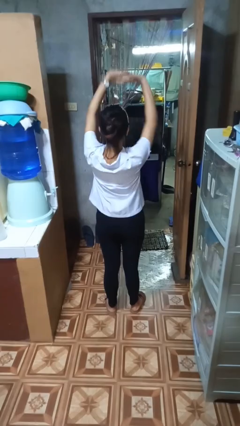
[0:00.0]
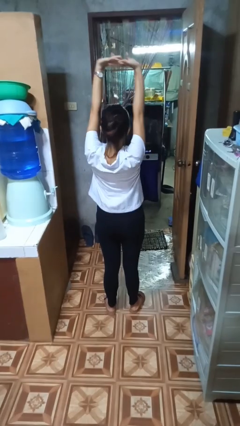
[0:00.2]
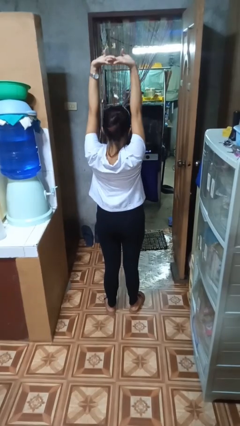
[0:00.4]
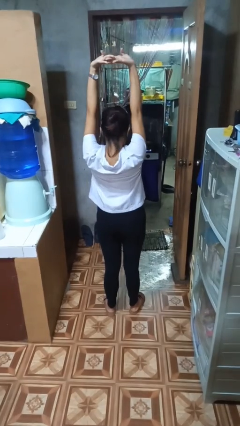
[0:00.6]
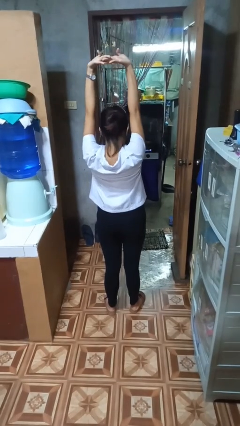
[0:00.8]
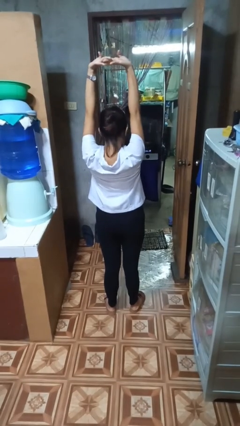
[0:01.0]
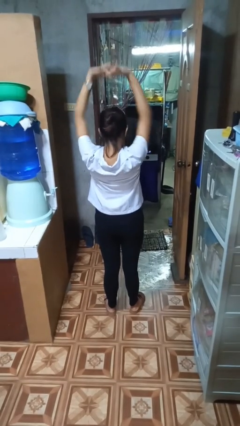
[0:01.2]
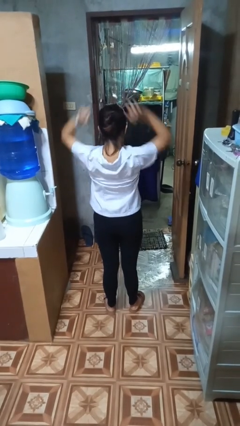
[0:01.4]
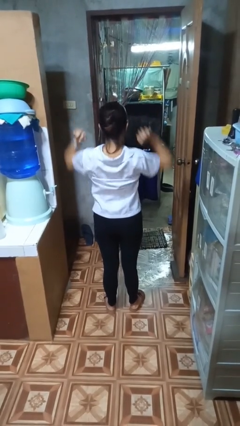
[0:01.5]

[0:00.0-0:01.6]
person stretches arms over head

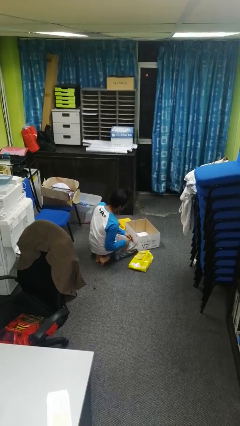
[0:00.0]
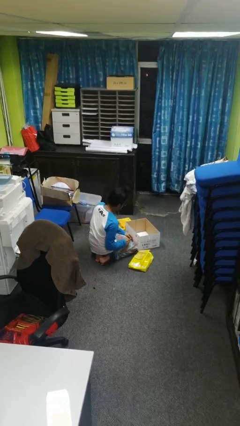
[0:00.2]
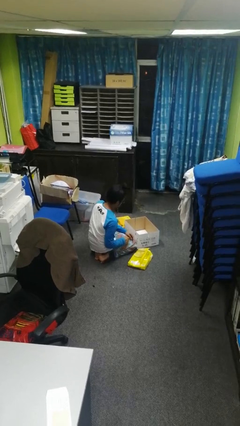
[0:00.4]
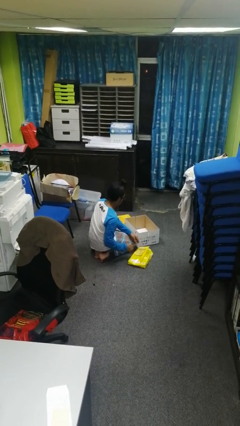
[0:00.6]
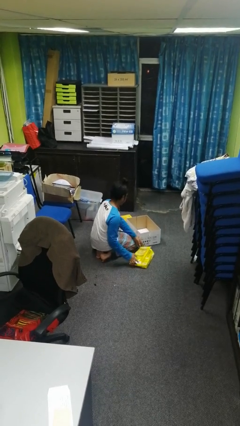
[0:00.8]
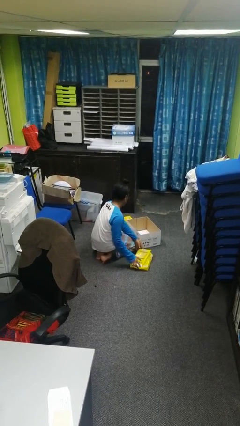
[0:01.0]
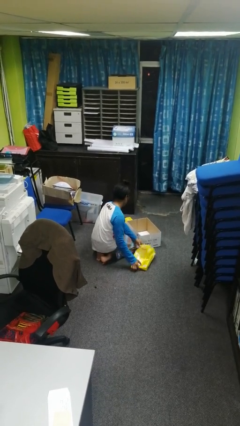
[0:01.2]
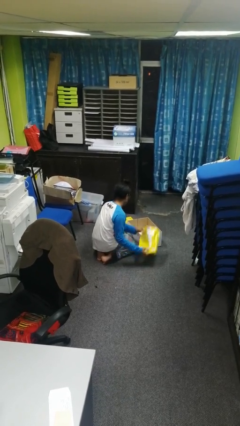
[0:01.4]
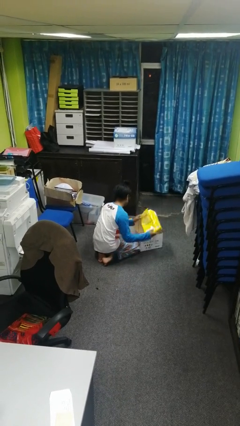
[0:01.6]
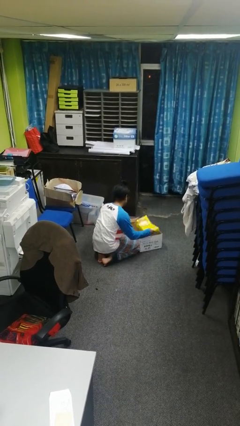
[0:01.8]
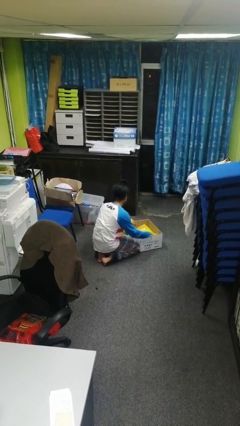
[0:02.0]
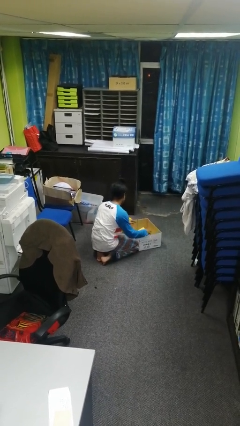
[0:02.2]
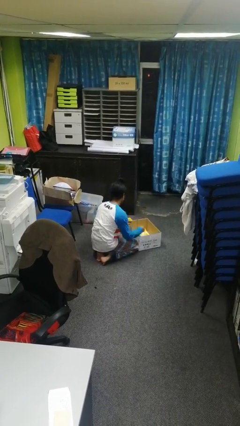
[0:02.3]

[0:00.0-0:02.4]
person puts object into box

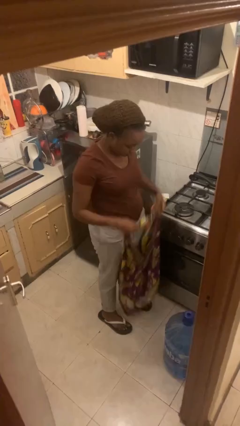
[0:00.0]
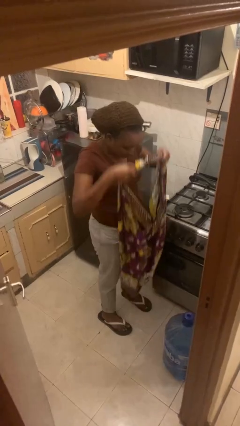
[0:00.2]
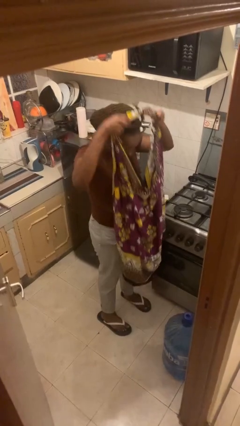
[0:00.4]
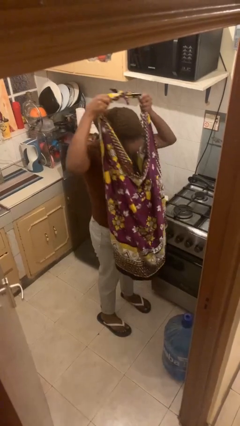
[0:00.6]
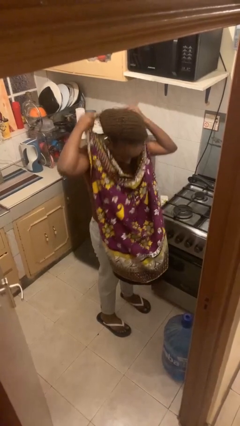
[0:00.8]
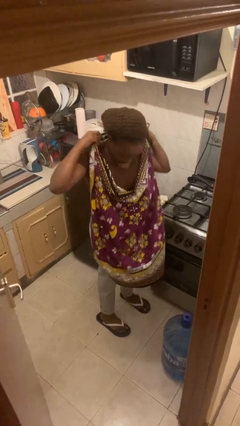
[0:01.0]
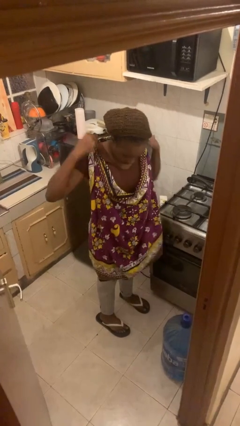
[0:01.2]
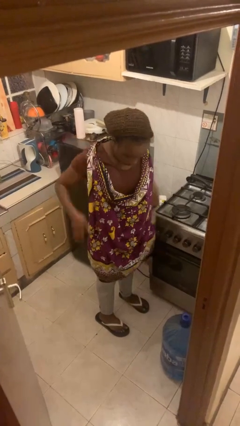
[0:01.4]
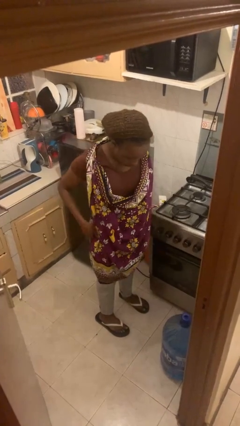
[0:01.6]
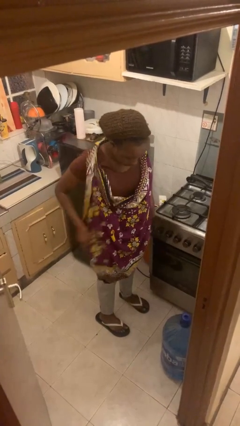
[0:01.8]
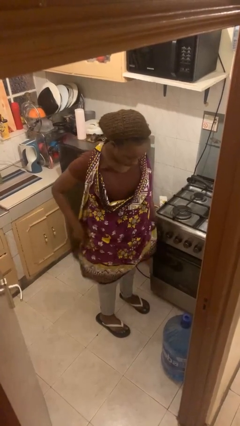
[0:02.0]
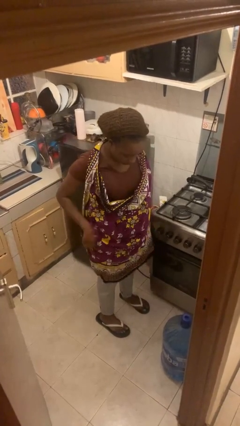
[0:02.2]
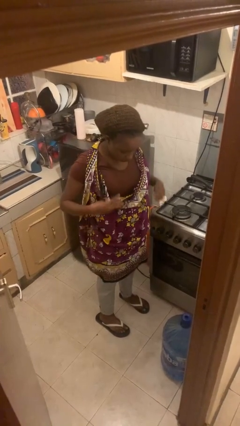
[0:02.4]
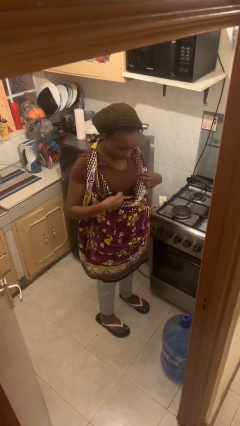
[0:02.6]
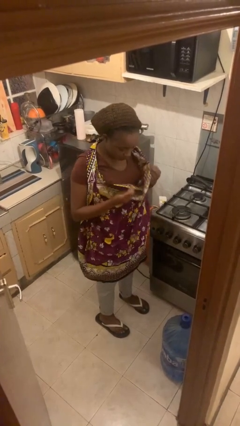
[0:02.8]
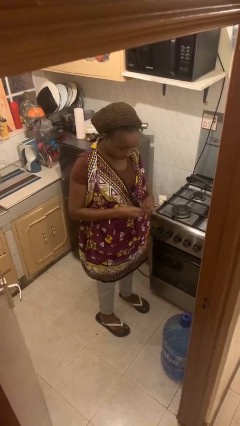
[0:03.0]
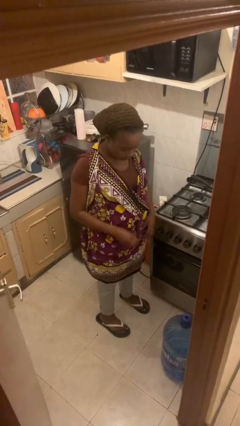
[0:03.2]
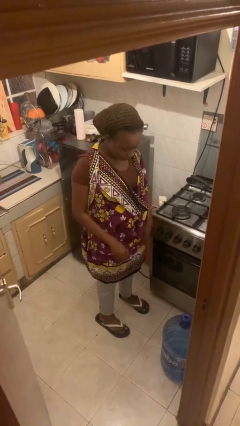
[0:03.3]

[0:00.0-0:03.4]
person puts on apron

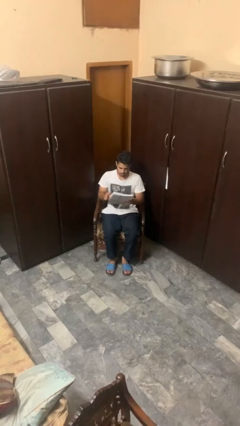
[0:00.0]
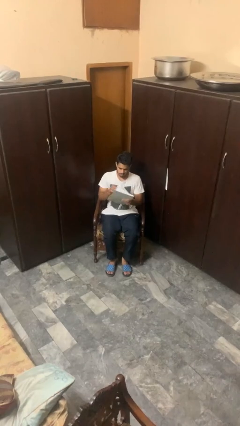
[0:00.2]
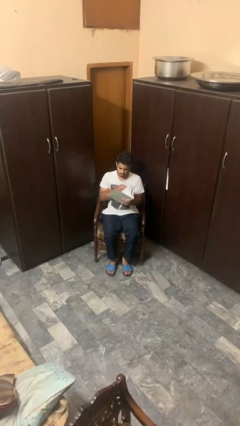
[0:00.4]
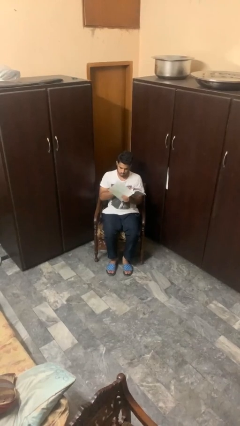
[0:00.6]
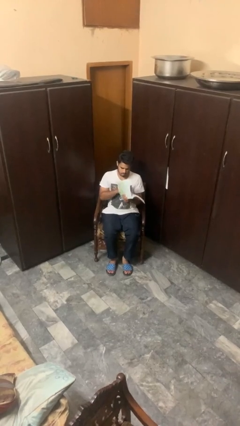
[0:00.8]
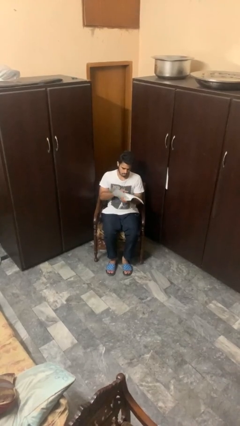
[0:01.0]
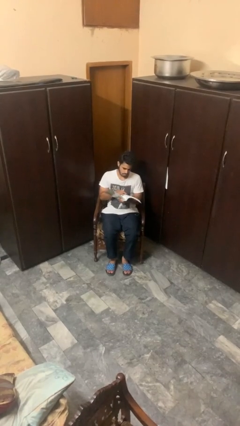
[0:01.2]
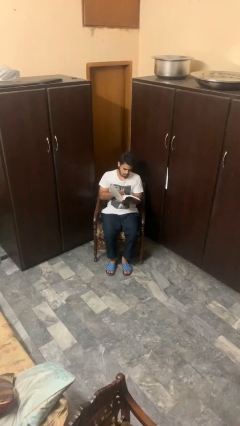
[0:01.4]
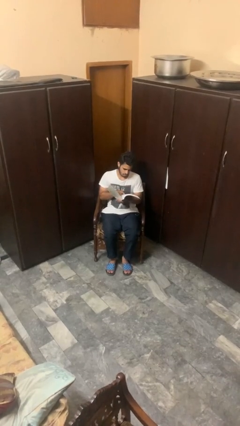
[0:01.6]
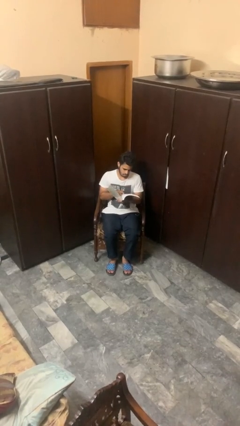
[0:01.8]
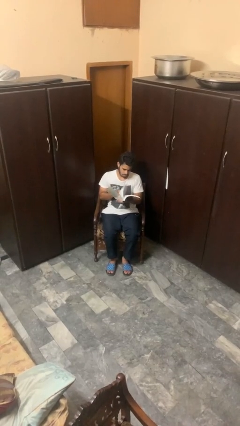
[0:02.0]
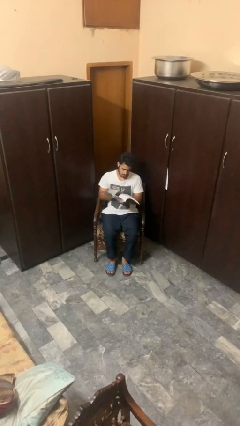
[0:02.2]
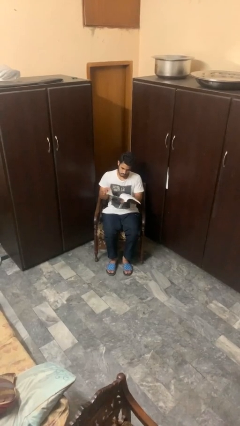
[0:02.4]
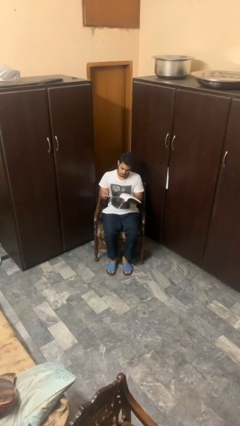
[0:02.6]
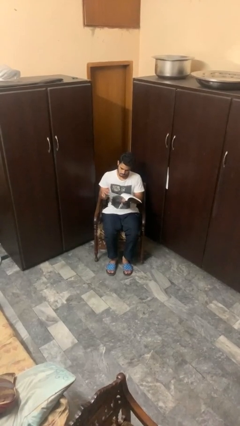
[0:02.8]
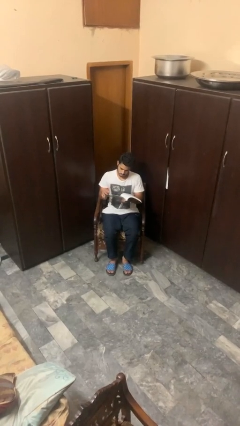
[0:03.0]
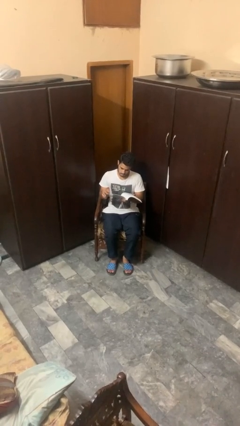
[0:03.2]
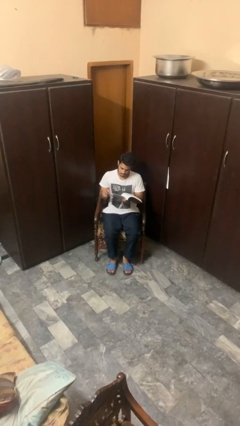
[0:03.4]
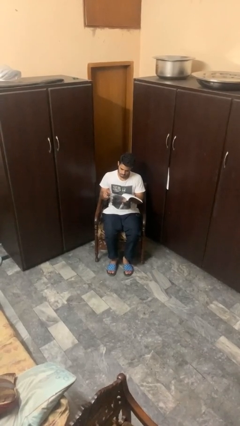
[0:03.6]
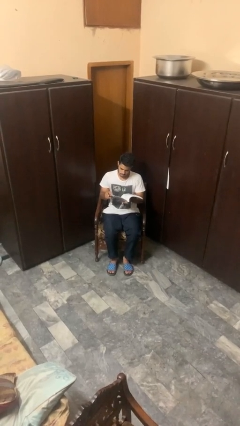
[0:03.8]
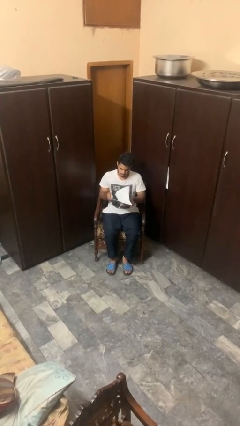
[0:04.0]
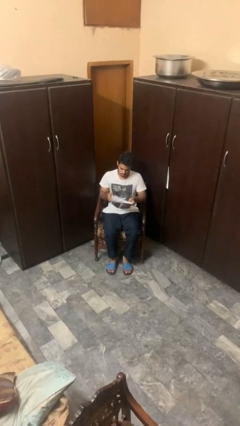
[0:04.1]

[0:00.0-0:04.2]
person reads book

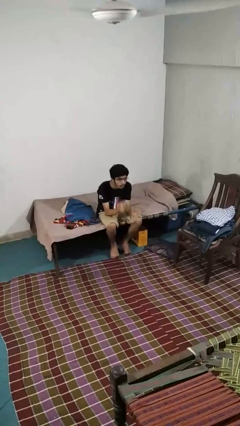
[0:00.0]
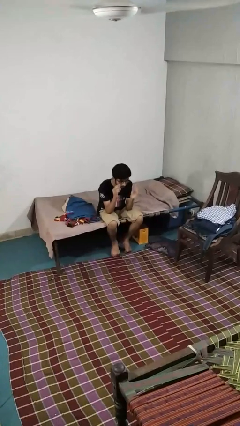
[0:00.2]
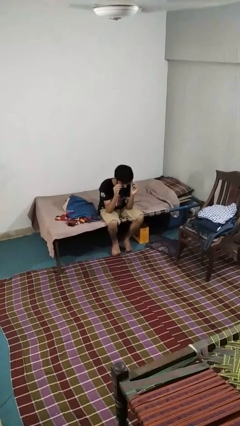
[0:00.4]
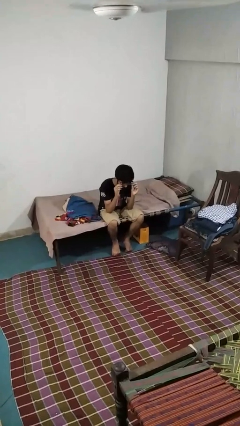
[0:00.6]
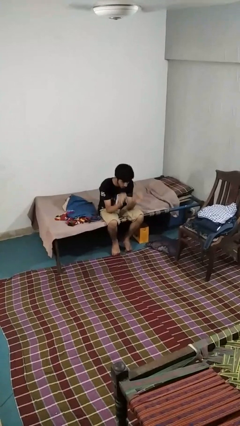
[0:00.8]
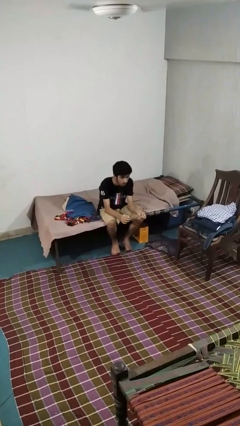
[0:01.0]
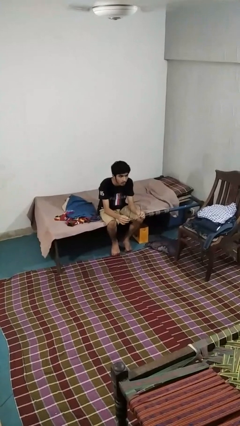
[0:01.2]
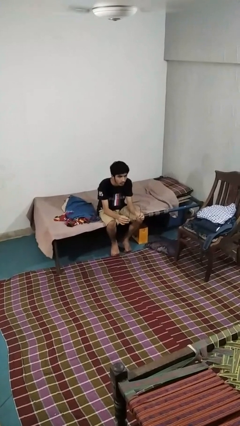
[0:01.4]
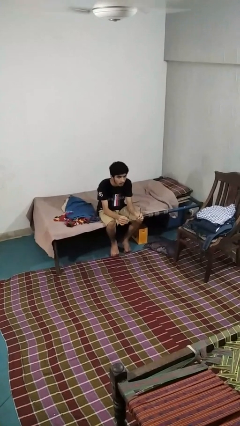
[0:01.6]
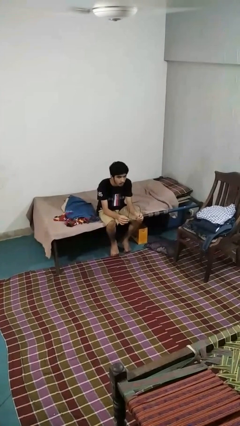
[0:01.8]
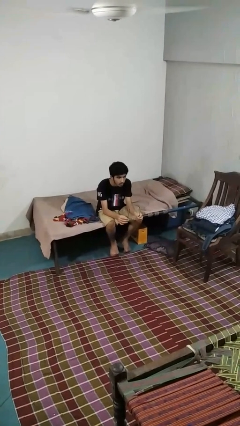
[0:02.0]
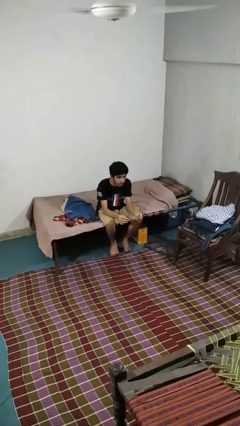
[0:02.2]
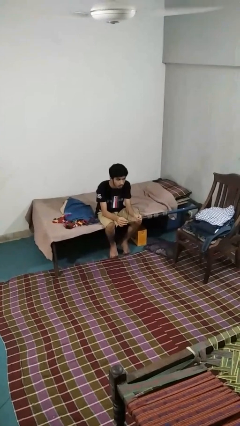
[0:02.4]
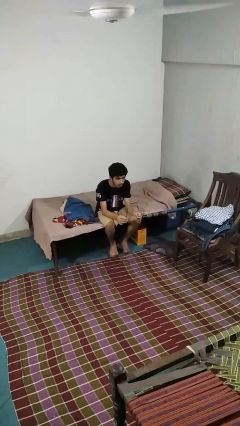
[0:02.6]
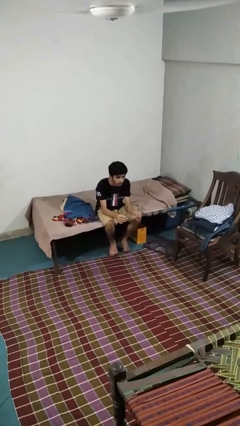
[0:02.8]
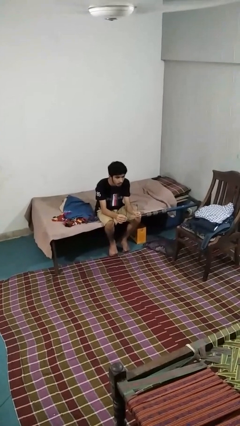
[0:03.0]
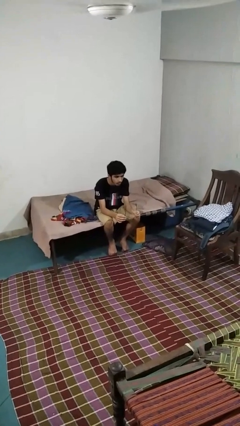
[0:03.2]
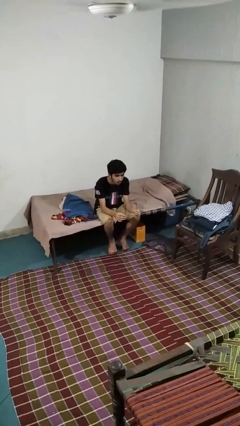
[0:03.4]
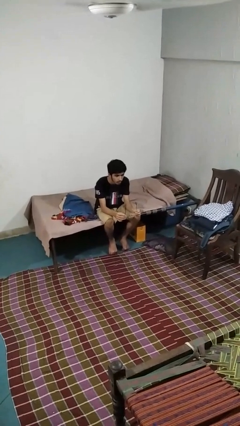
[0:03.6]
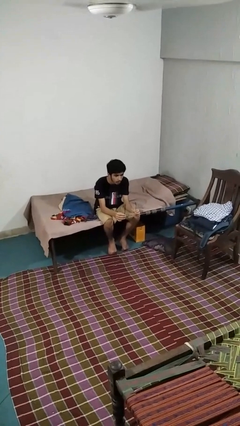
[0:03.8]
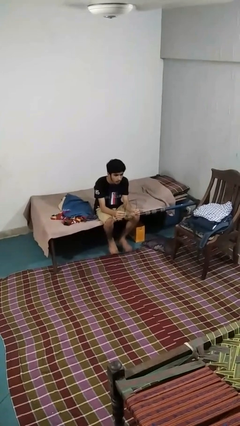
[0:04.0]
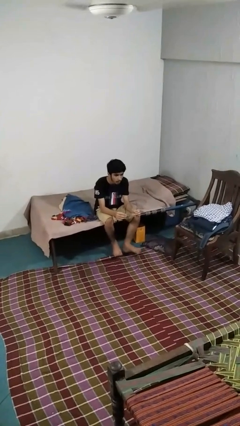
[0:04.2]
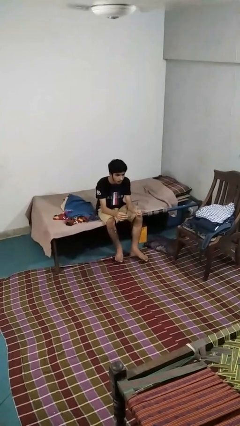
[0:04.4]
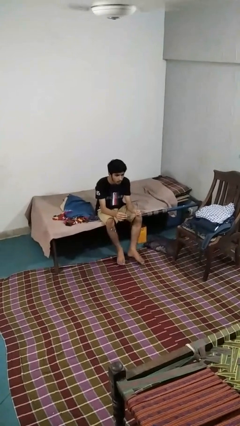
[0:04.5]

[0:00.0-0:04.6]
person takes off glasses

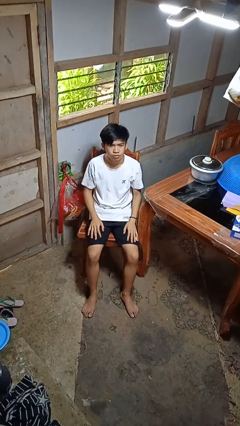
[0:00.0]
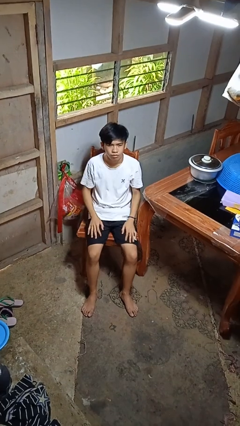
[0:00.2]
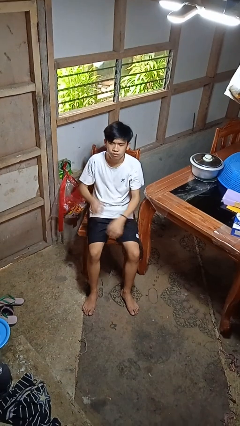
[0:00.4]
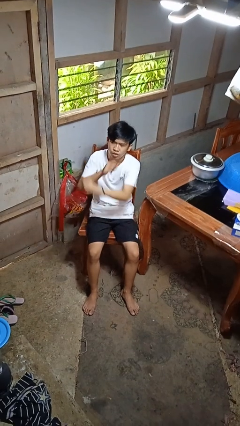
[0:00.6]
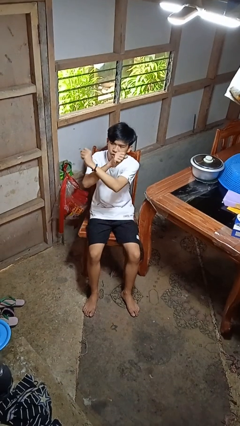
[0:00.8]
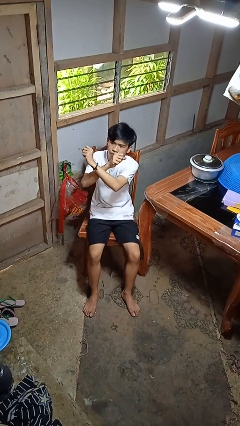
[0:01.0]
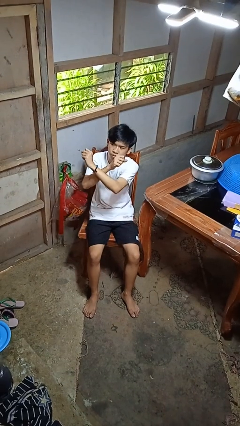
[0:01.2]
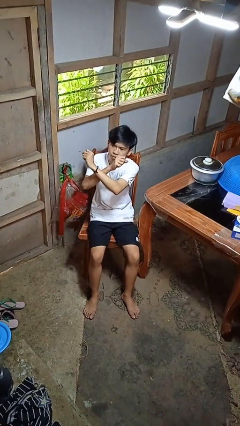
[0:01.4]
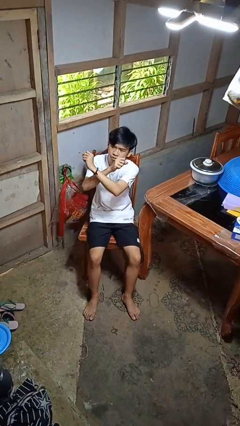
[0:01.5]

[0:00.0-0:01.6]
person gestures arms x
